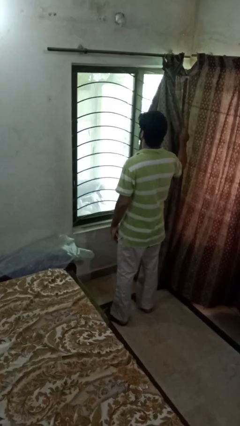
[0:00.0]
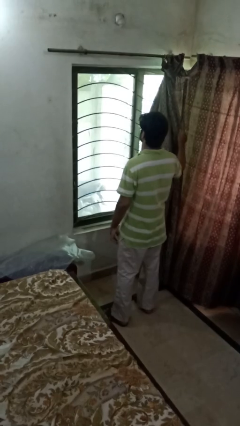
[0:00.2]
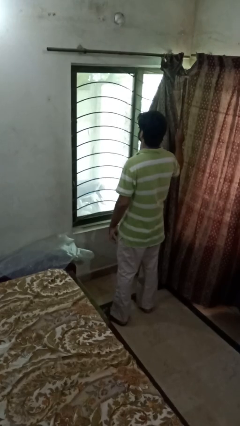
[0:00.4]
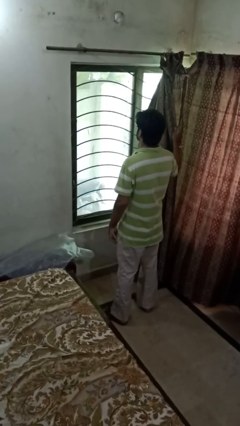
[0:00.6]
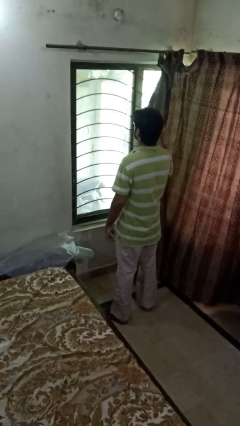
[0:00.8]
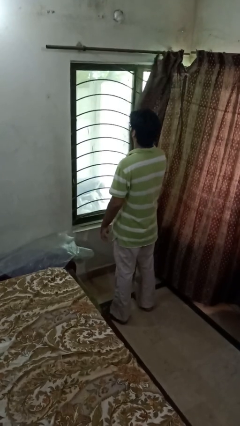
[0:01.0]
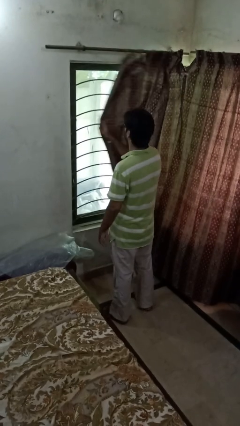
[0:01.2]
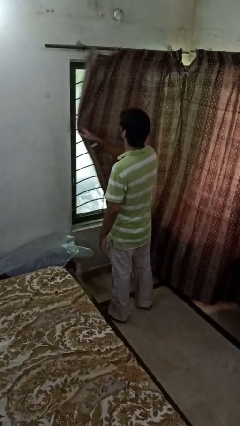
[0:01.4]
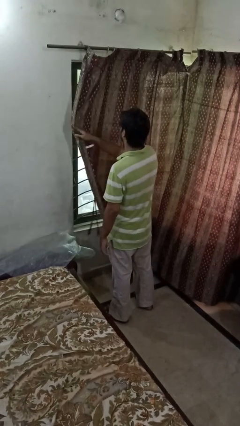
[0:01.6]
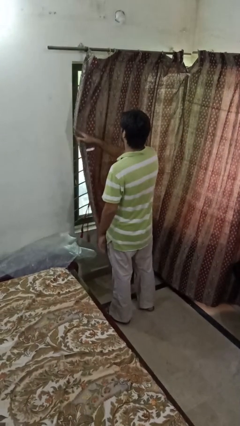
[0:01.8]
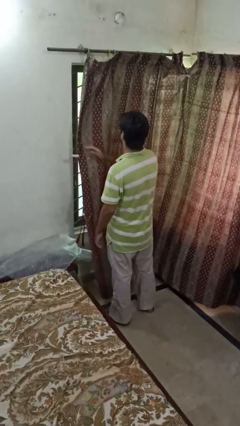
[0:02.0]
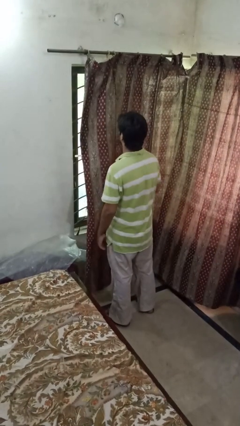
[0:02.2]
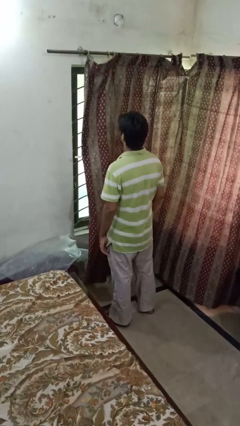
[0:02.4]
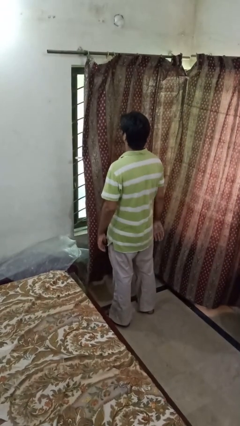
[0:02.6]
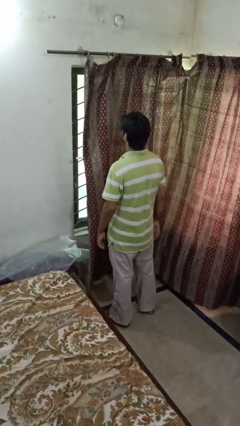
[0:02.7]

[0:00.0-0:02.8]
person closes curtains

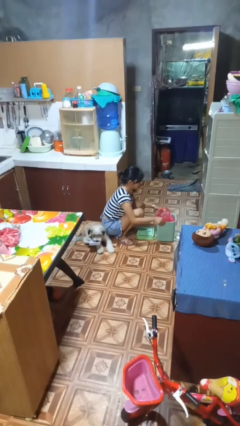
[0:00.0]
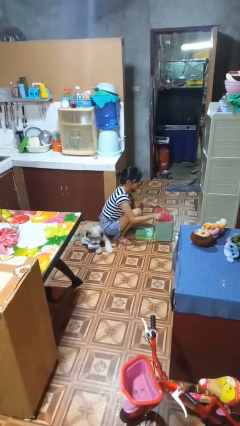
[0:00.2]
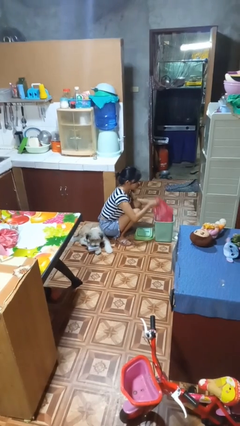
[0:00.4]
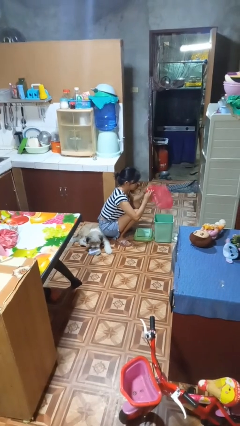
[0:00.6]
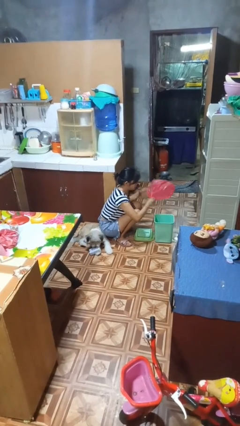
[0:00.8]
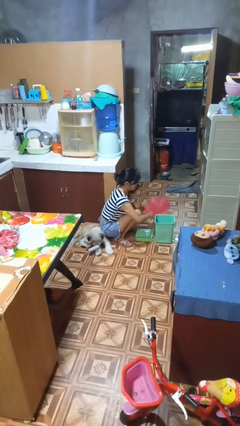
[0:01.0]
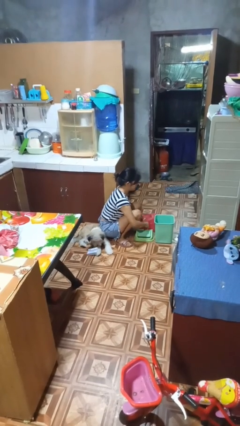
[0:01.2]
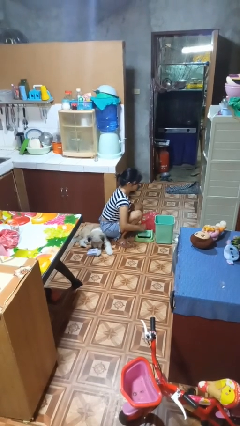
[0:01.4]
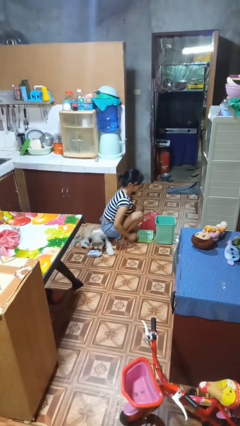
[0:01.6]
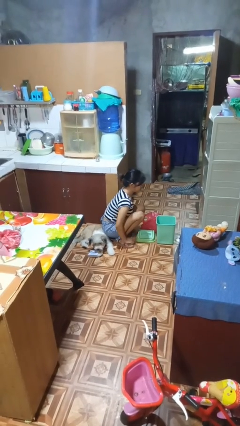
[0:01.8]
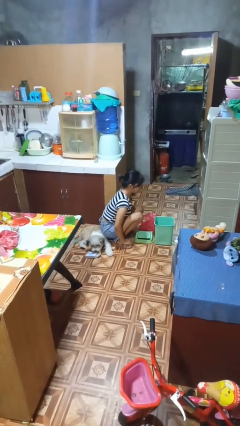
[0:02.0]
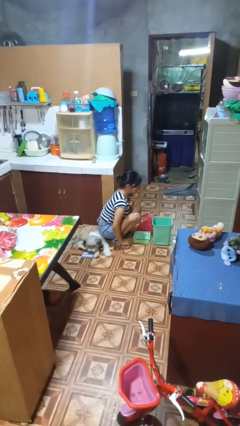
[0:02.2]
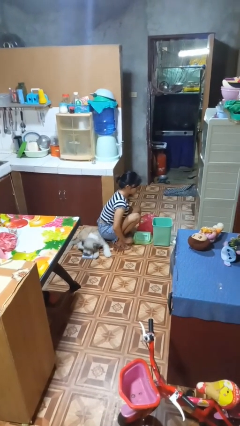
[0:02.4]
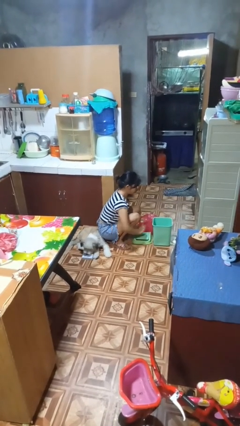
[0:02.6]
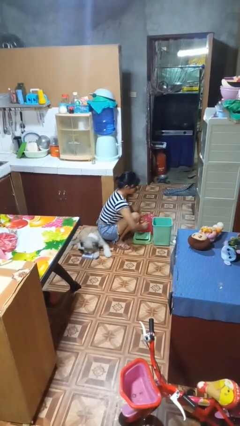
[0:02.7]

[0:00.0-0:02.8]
person removes trashbag from trashcan

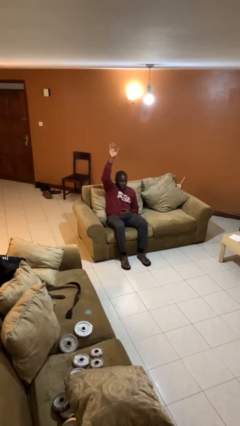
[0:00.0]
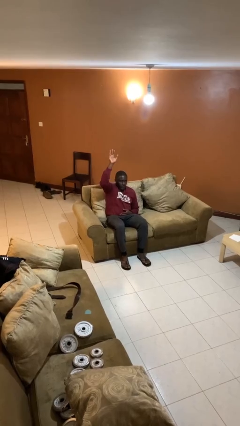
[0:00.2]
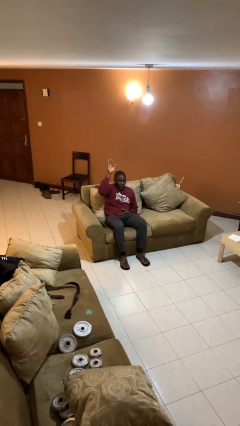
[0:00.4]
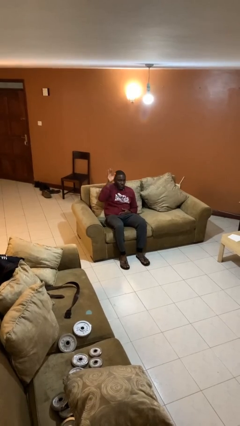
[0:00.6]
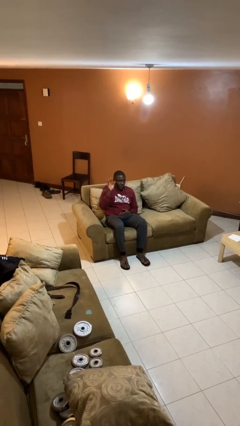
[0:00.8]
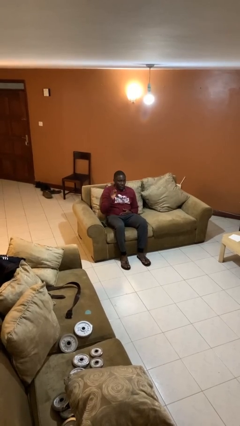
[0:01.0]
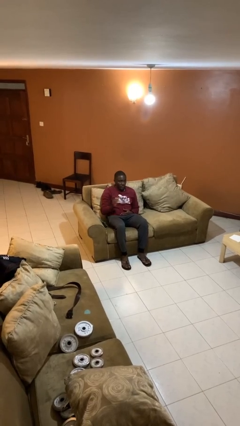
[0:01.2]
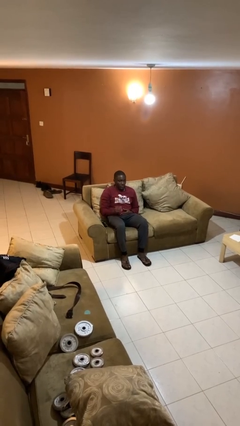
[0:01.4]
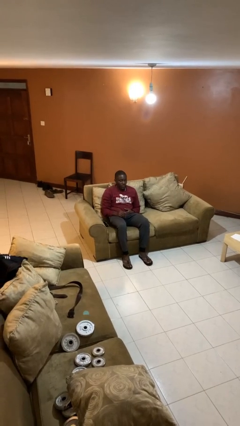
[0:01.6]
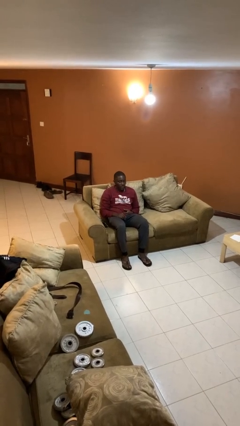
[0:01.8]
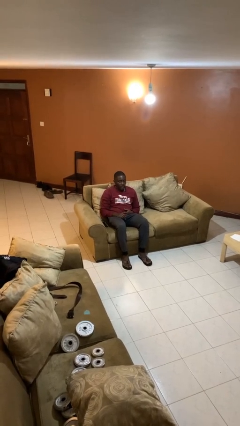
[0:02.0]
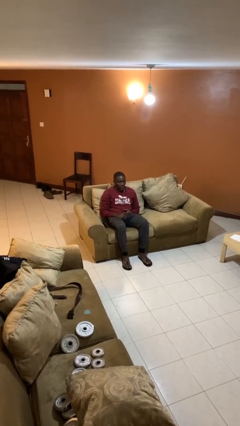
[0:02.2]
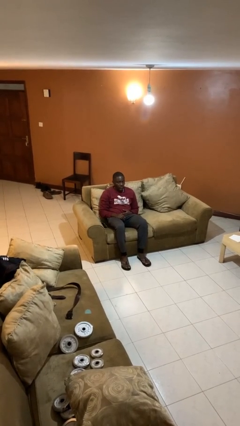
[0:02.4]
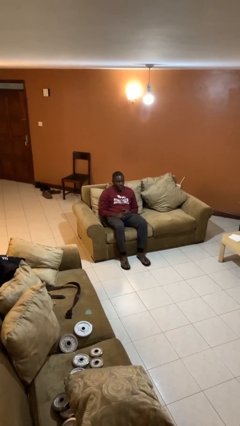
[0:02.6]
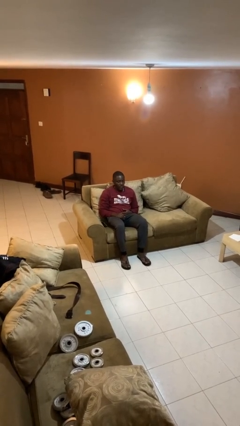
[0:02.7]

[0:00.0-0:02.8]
person gestures lower hand

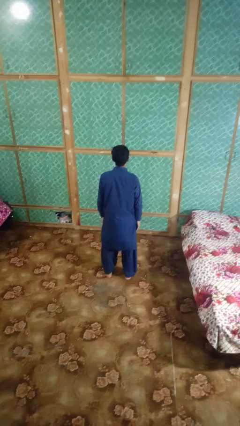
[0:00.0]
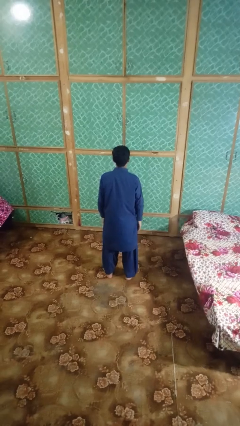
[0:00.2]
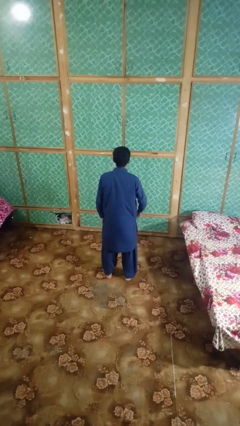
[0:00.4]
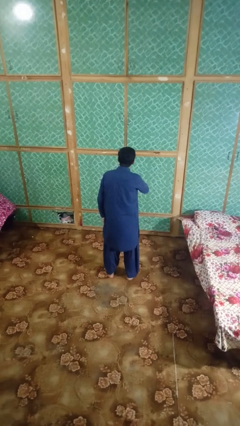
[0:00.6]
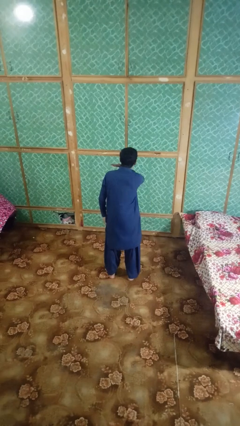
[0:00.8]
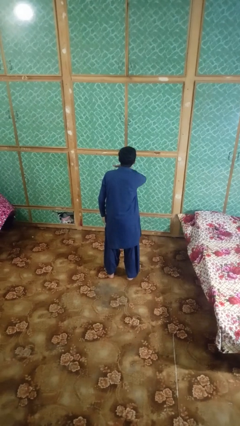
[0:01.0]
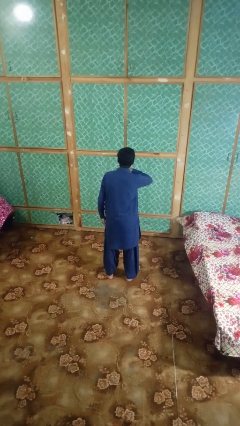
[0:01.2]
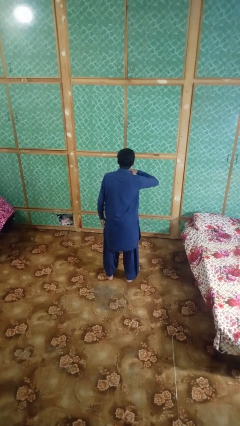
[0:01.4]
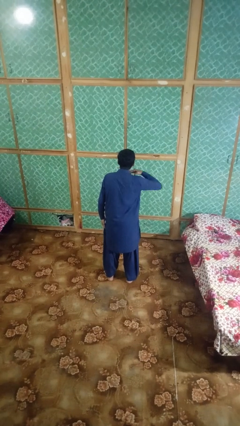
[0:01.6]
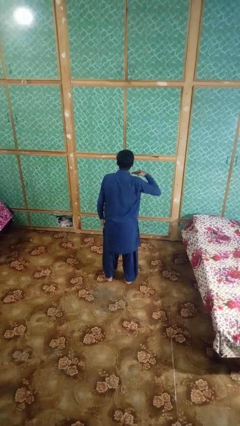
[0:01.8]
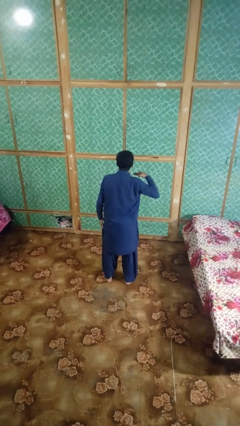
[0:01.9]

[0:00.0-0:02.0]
person gestures cut

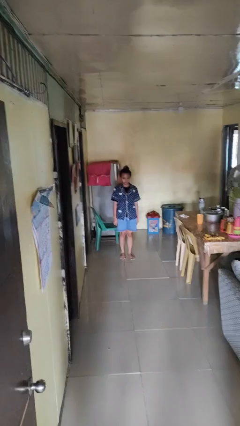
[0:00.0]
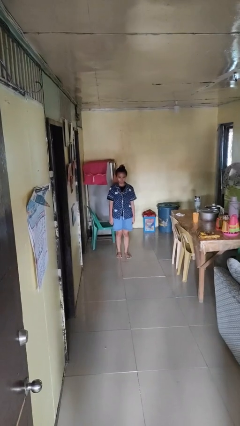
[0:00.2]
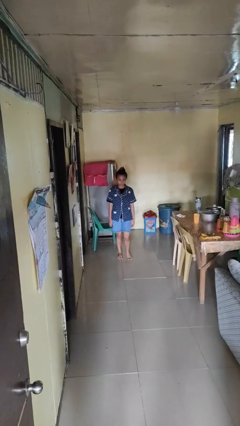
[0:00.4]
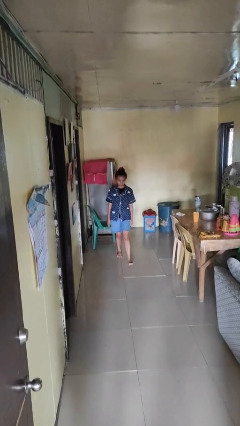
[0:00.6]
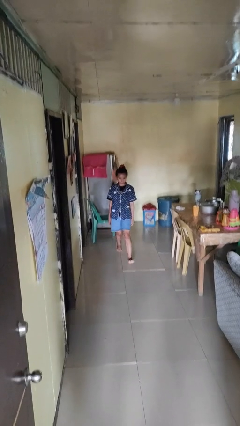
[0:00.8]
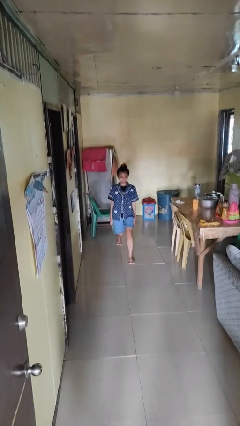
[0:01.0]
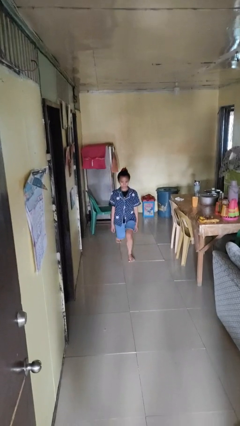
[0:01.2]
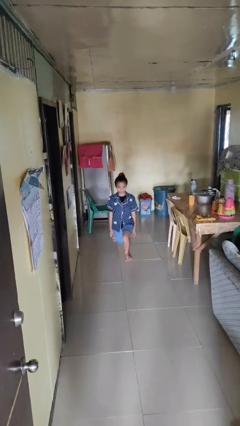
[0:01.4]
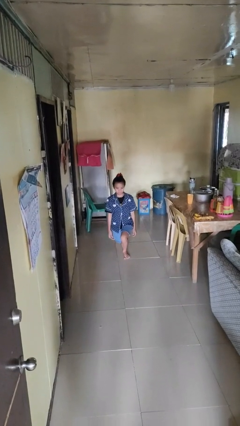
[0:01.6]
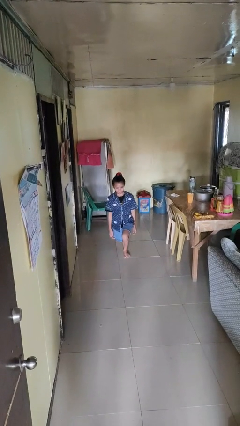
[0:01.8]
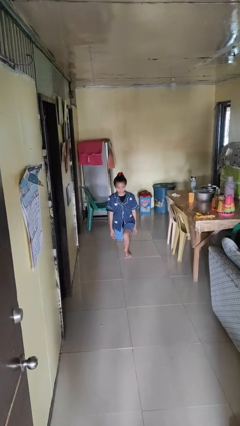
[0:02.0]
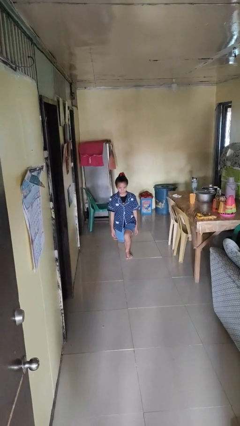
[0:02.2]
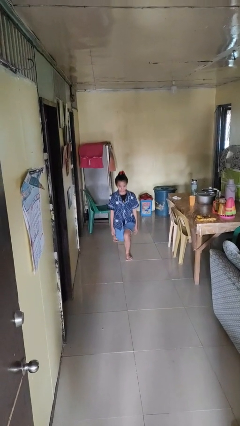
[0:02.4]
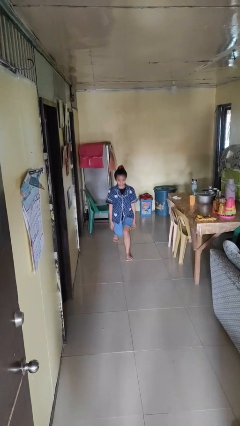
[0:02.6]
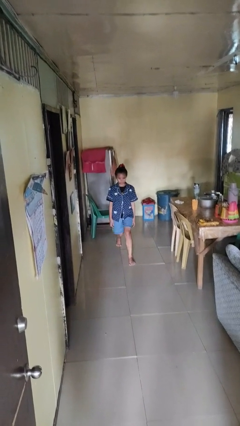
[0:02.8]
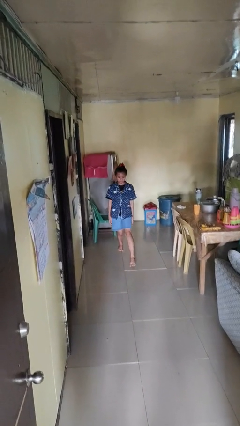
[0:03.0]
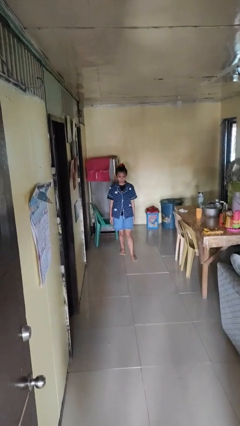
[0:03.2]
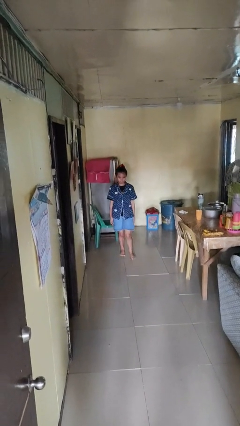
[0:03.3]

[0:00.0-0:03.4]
person exercises with lunges

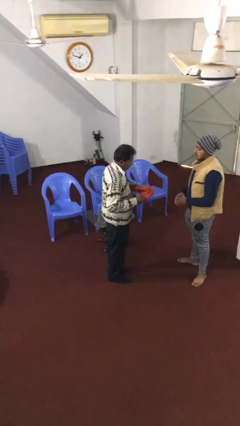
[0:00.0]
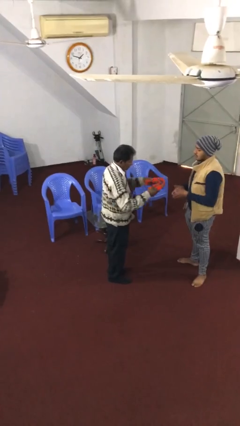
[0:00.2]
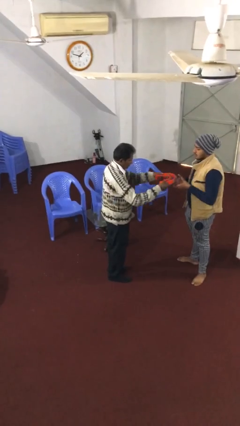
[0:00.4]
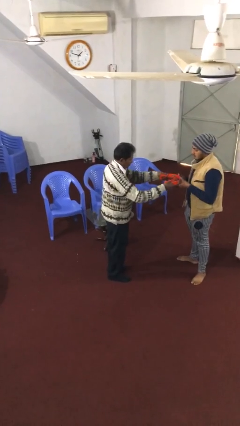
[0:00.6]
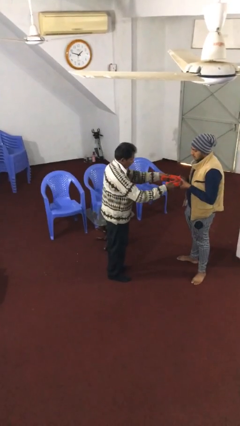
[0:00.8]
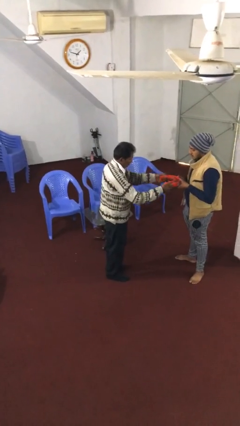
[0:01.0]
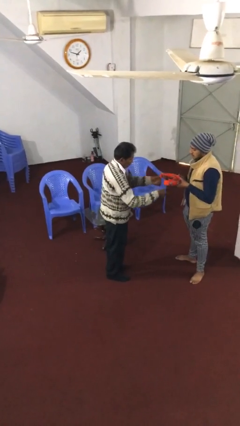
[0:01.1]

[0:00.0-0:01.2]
person transfers object to person

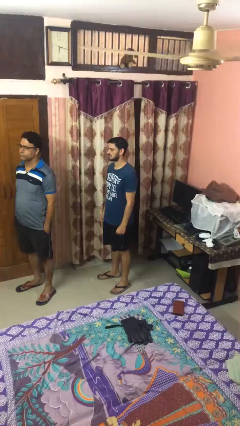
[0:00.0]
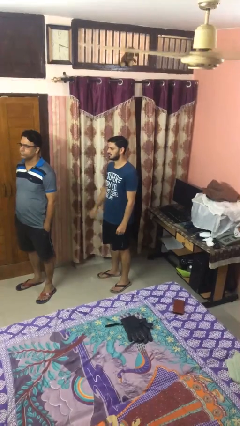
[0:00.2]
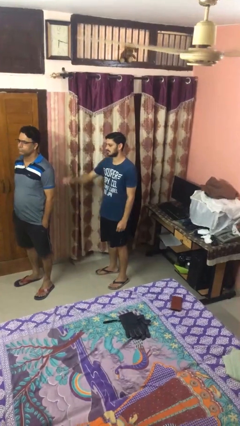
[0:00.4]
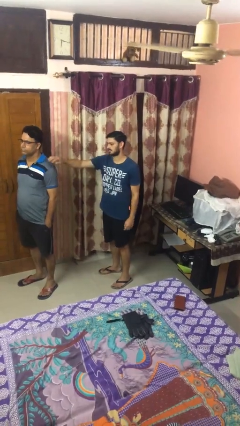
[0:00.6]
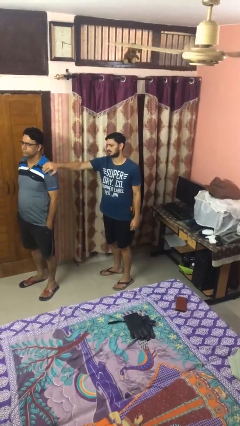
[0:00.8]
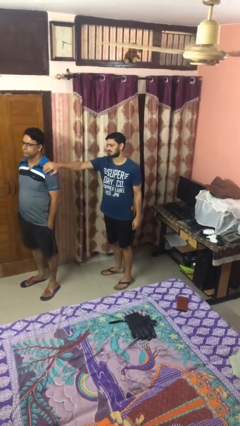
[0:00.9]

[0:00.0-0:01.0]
person grabs person by shoulder

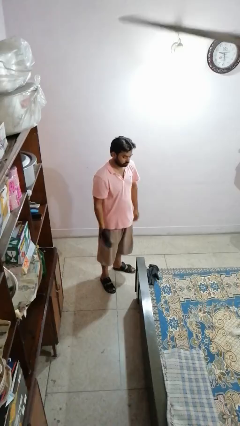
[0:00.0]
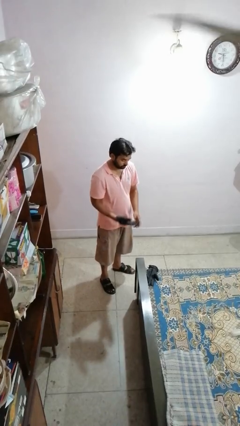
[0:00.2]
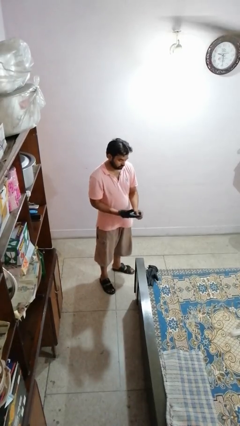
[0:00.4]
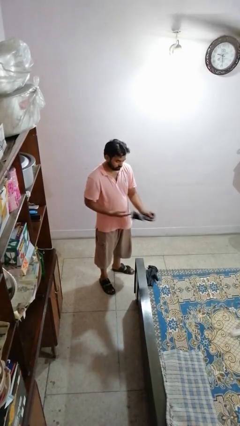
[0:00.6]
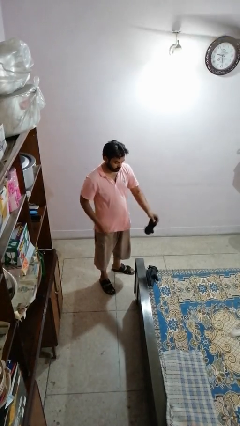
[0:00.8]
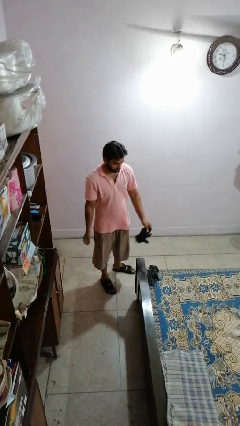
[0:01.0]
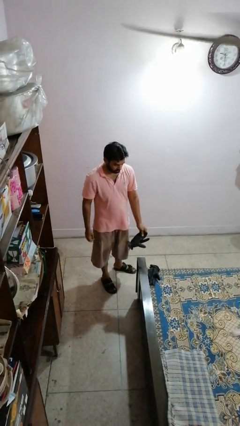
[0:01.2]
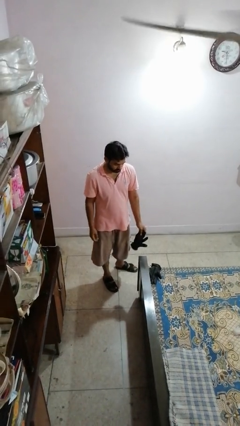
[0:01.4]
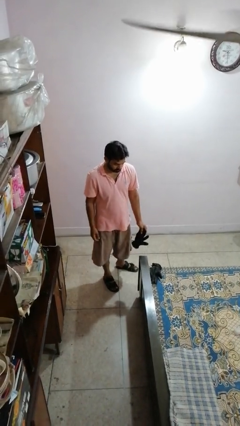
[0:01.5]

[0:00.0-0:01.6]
person takes off gloves
